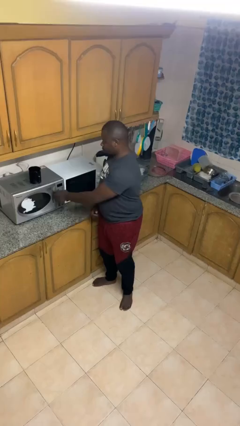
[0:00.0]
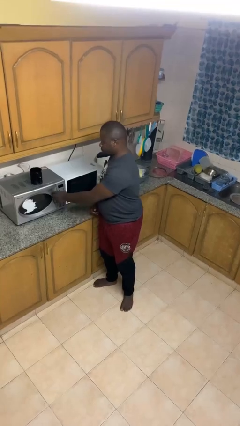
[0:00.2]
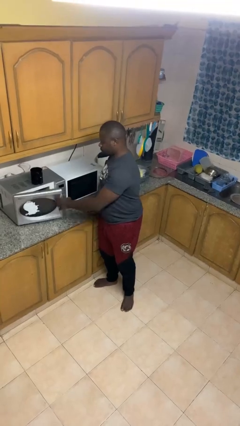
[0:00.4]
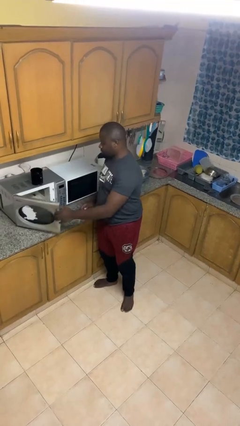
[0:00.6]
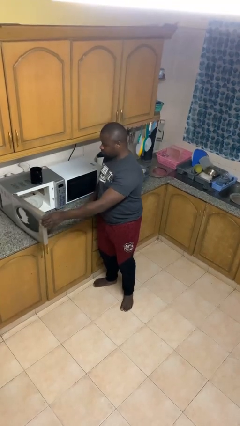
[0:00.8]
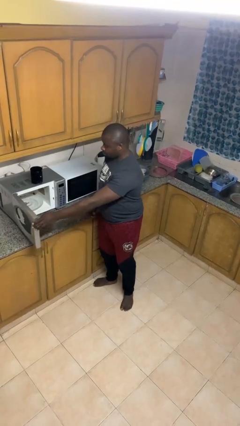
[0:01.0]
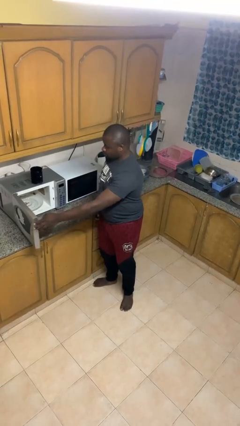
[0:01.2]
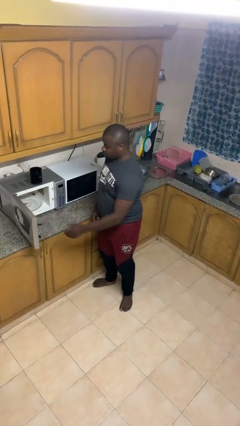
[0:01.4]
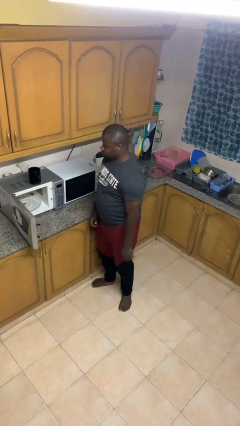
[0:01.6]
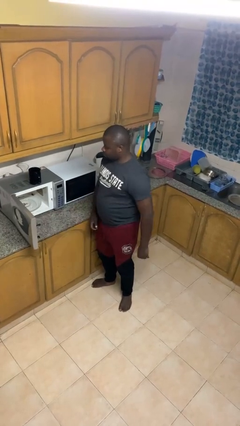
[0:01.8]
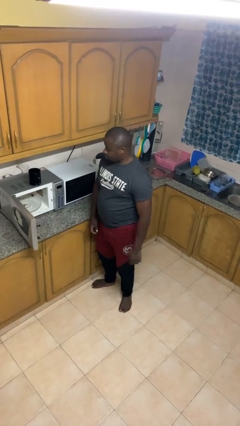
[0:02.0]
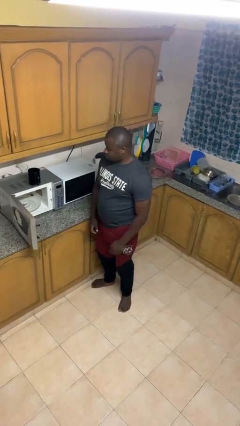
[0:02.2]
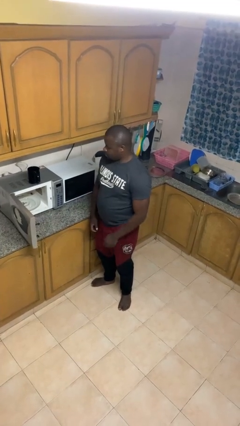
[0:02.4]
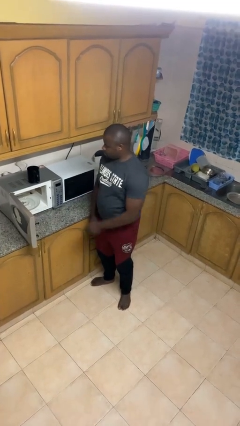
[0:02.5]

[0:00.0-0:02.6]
person opens microwave

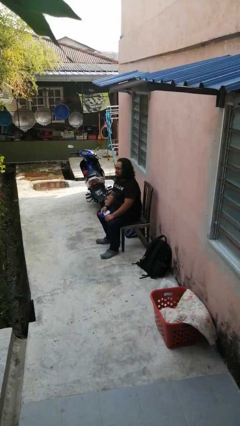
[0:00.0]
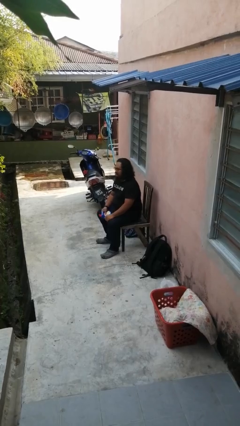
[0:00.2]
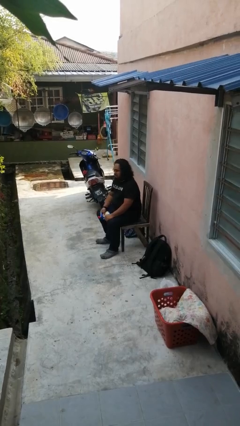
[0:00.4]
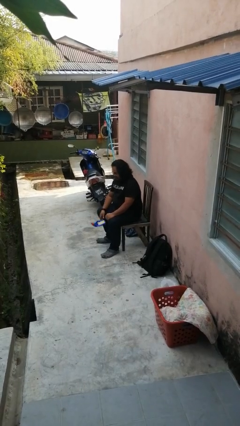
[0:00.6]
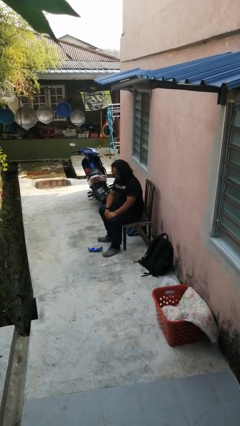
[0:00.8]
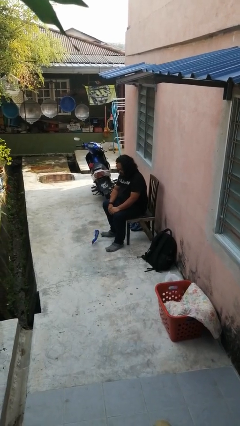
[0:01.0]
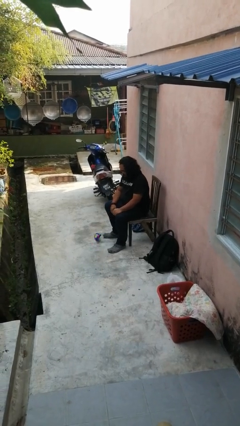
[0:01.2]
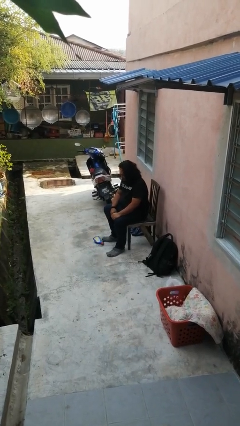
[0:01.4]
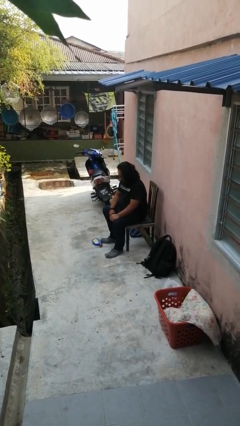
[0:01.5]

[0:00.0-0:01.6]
person drops object

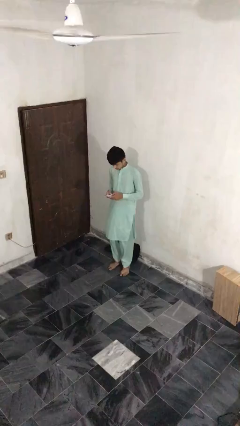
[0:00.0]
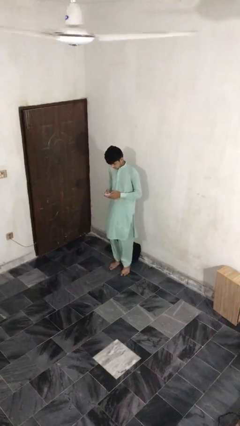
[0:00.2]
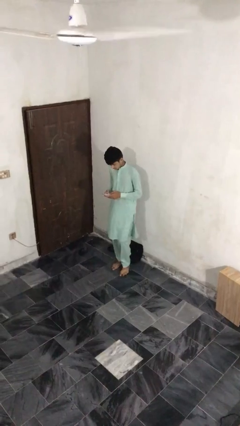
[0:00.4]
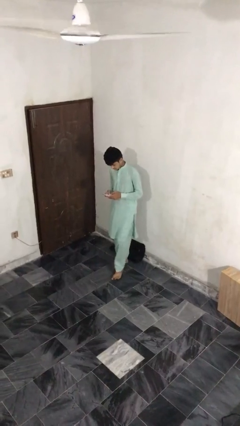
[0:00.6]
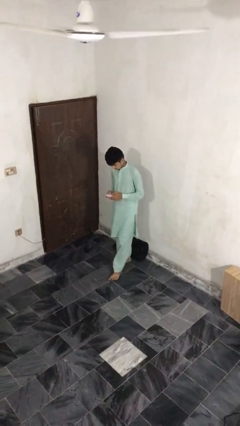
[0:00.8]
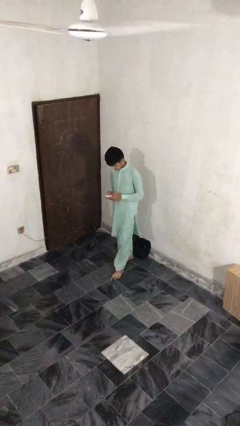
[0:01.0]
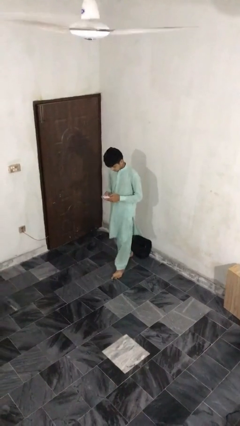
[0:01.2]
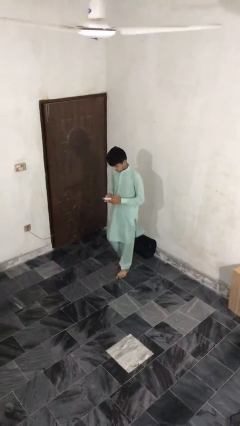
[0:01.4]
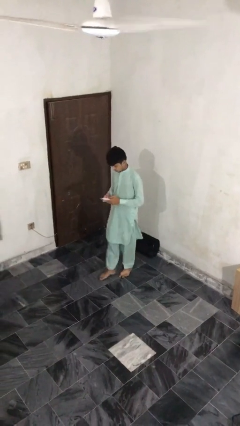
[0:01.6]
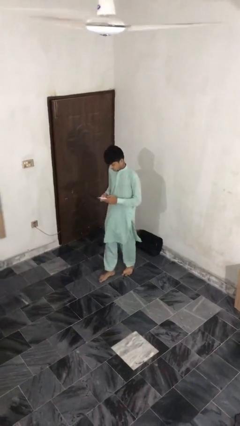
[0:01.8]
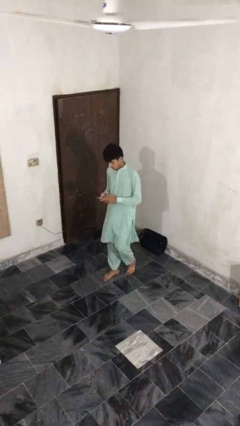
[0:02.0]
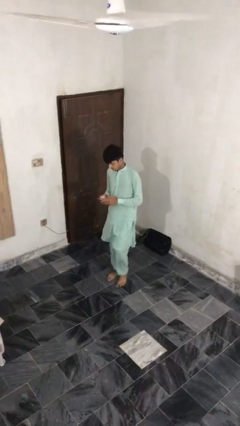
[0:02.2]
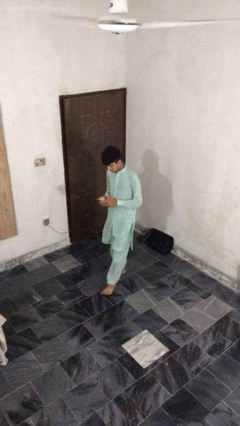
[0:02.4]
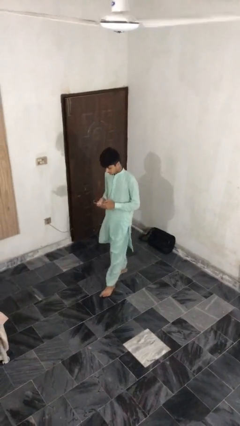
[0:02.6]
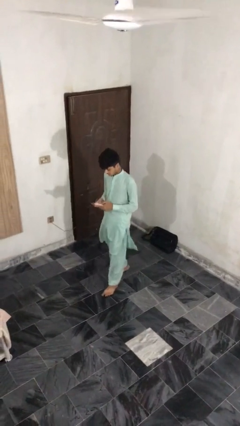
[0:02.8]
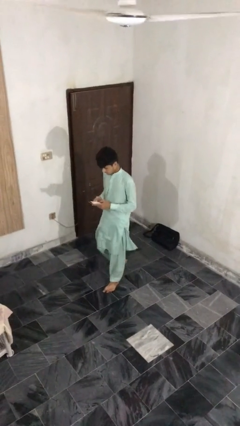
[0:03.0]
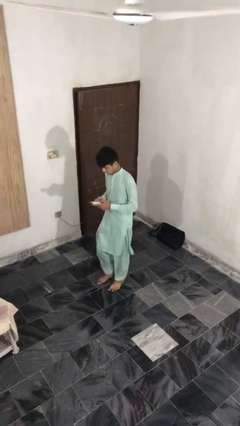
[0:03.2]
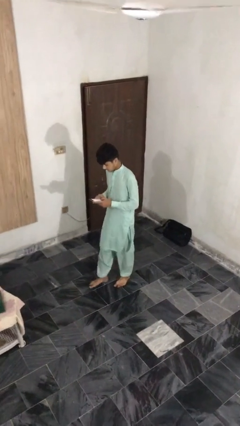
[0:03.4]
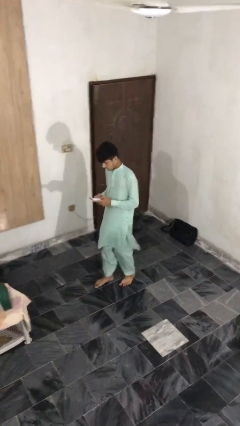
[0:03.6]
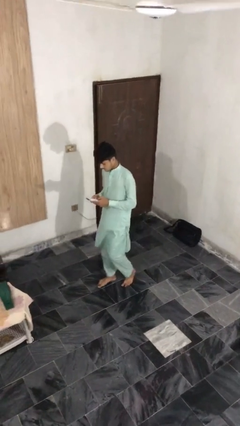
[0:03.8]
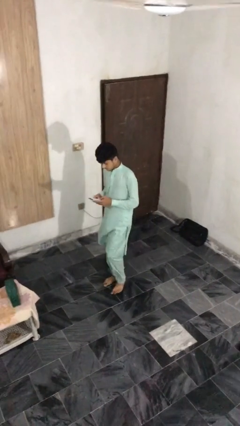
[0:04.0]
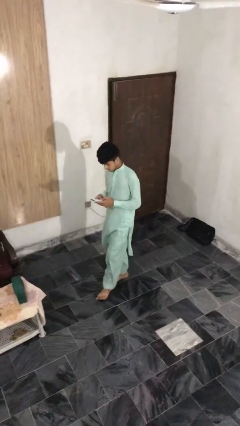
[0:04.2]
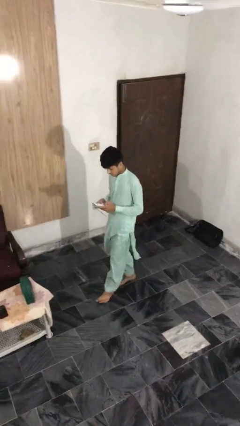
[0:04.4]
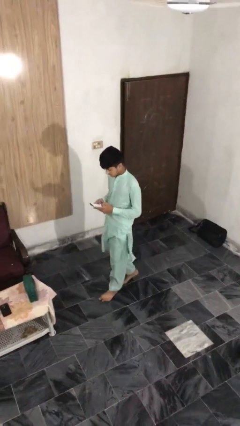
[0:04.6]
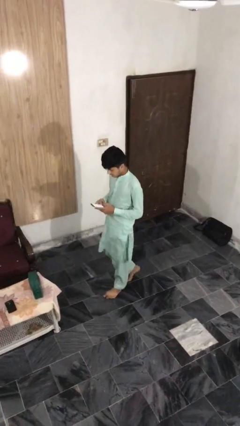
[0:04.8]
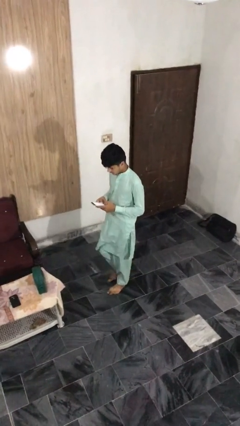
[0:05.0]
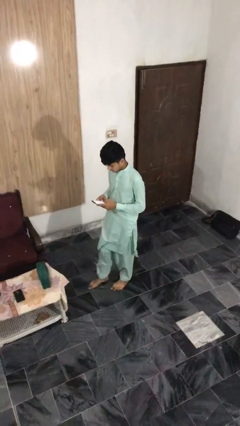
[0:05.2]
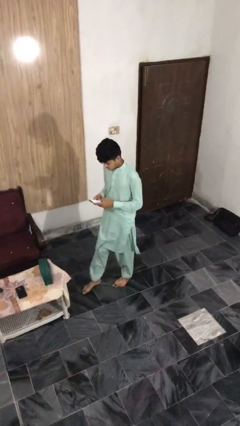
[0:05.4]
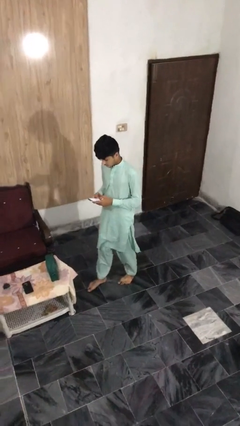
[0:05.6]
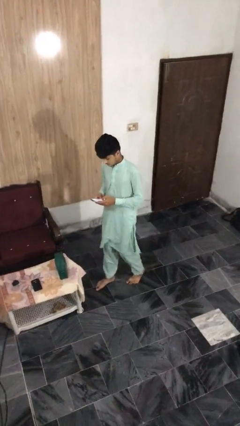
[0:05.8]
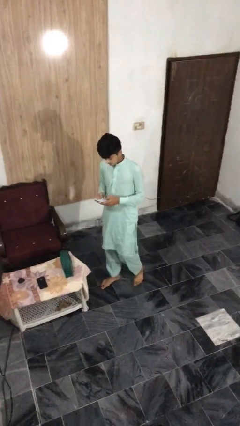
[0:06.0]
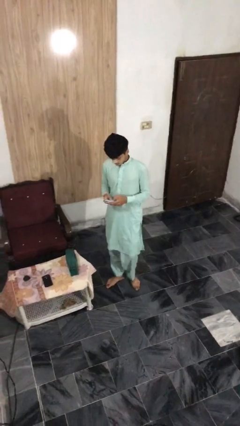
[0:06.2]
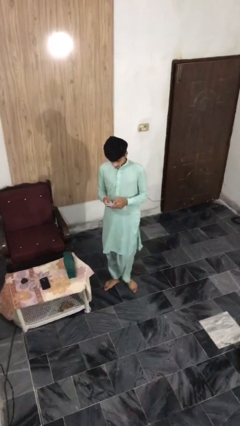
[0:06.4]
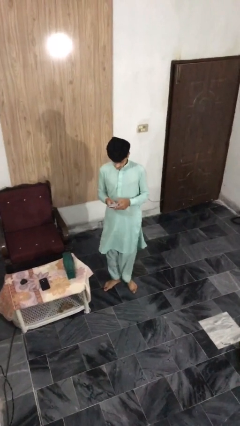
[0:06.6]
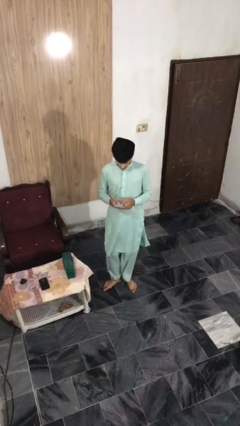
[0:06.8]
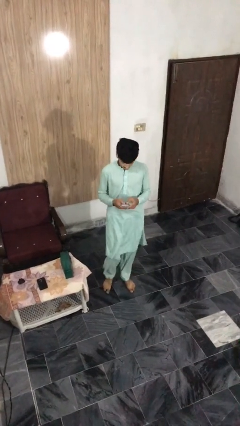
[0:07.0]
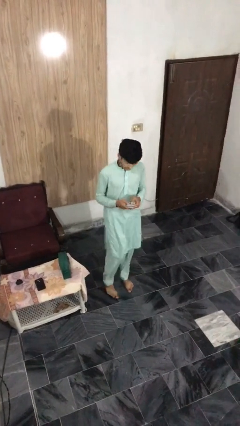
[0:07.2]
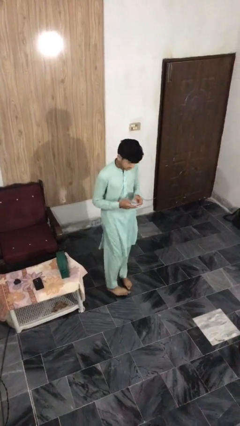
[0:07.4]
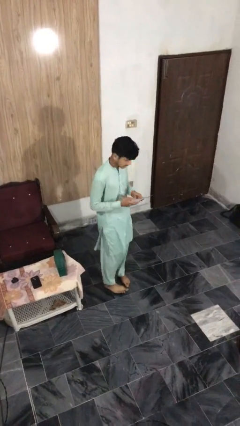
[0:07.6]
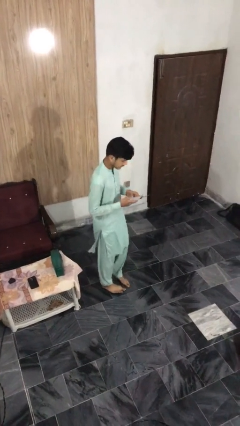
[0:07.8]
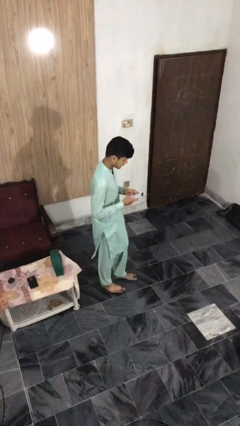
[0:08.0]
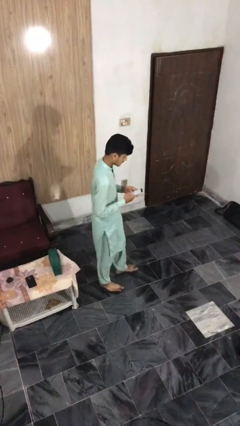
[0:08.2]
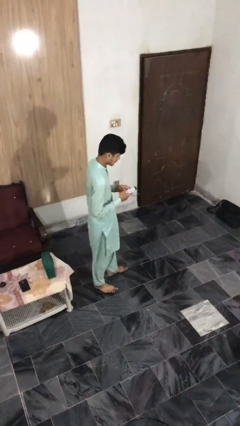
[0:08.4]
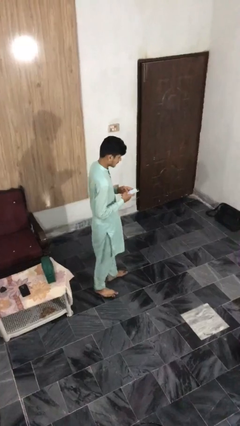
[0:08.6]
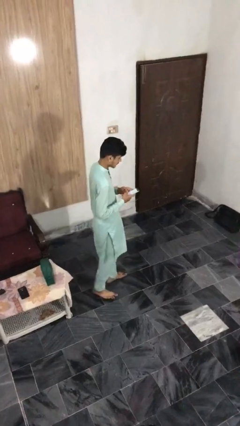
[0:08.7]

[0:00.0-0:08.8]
person texts on phone

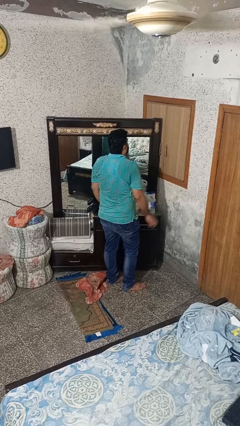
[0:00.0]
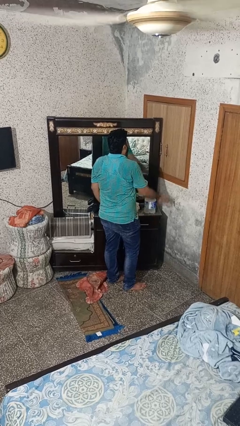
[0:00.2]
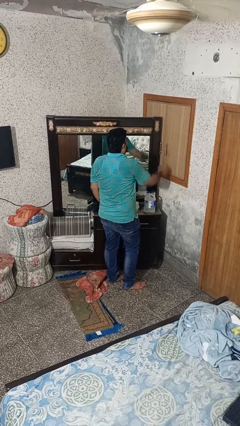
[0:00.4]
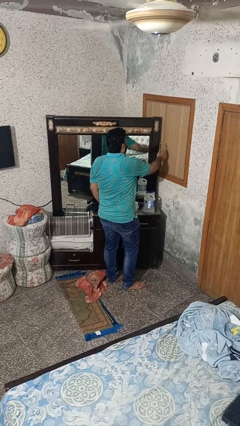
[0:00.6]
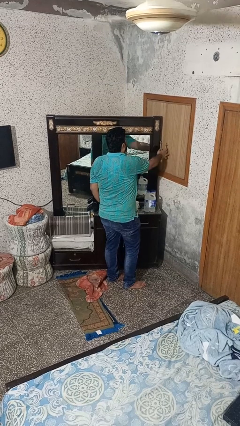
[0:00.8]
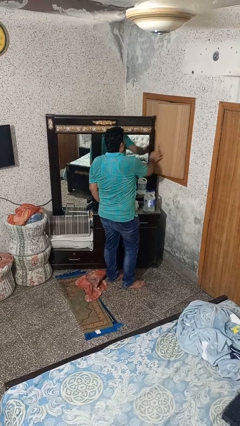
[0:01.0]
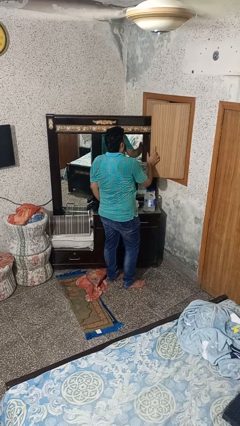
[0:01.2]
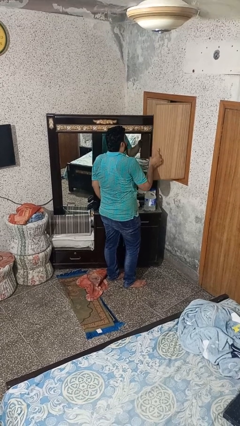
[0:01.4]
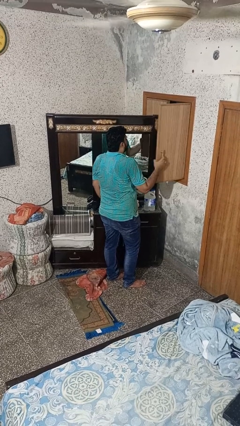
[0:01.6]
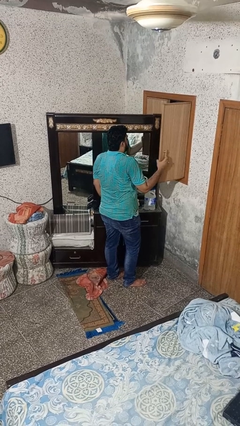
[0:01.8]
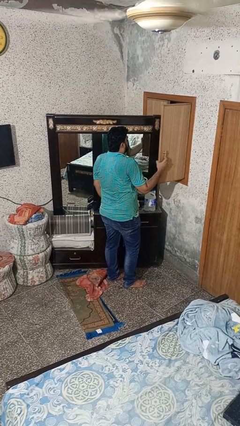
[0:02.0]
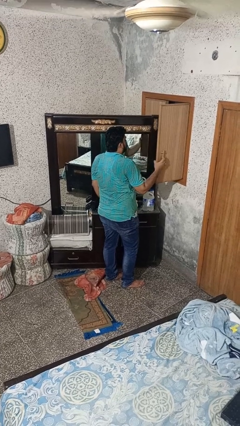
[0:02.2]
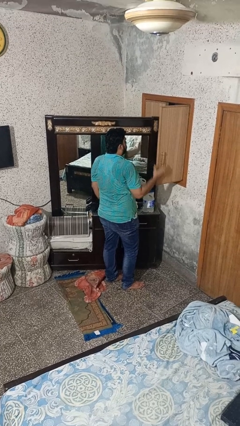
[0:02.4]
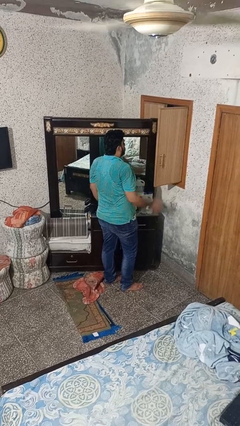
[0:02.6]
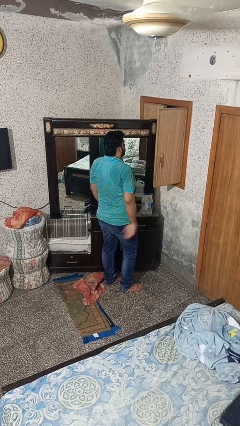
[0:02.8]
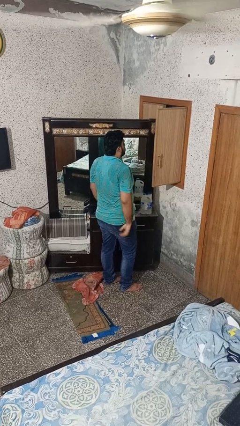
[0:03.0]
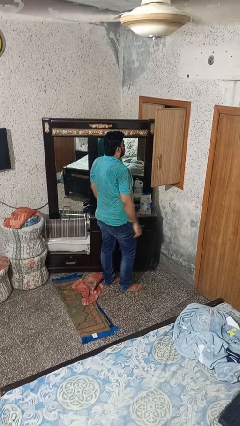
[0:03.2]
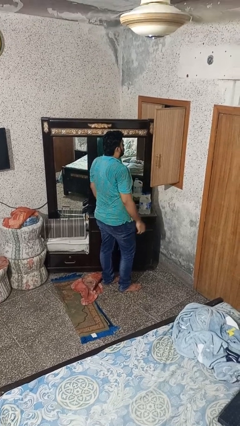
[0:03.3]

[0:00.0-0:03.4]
person opens home window

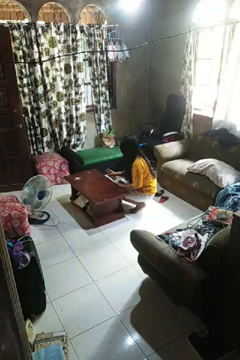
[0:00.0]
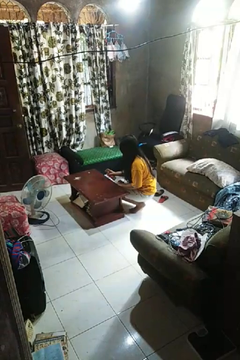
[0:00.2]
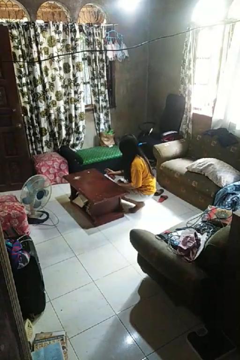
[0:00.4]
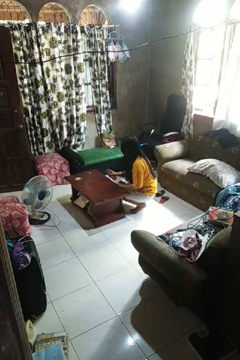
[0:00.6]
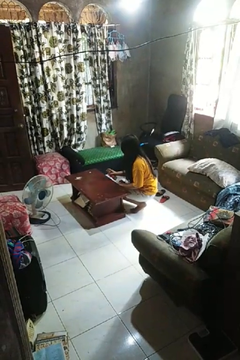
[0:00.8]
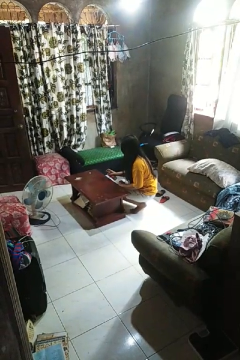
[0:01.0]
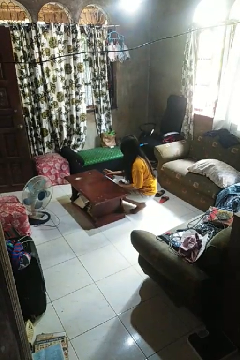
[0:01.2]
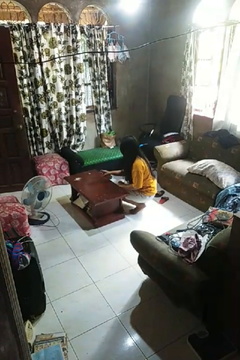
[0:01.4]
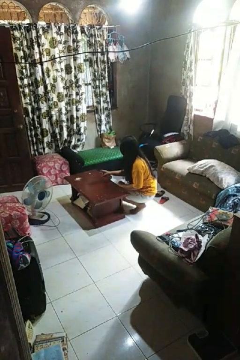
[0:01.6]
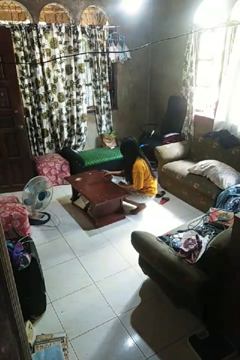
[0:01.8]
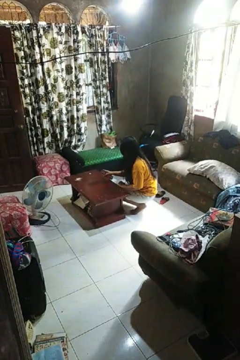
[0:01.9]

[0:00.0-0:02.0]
person sprays from bottle
